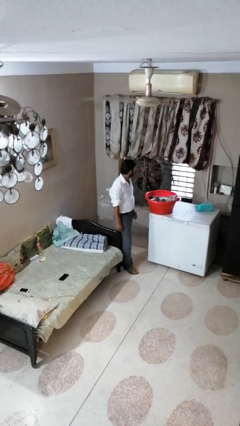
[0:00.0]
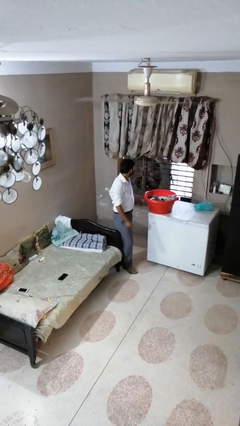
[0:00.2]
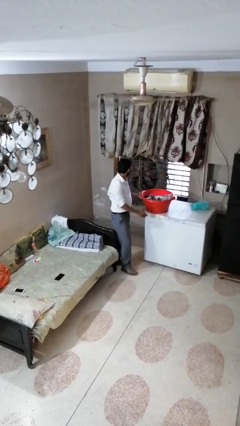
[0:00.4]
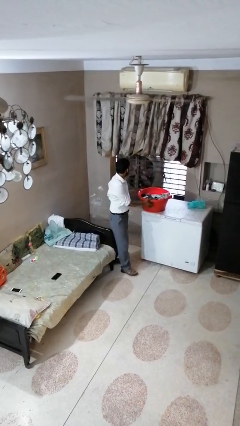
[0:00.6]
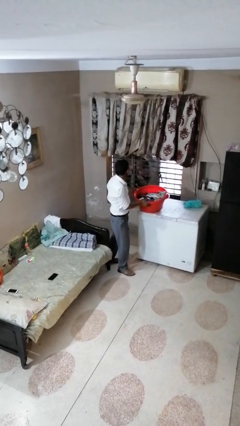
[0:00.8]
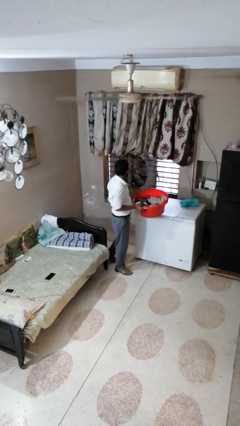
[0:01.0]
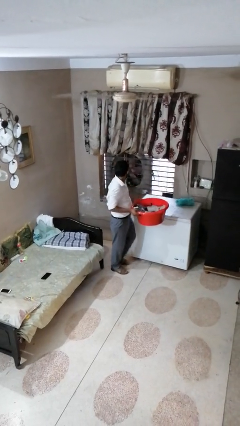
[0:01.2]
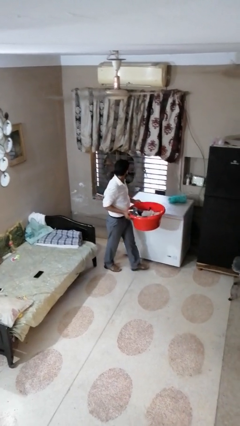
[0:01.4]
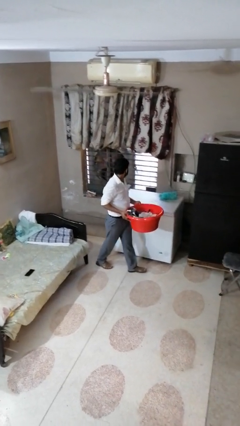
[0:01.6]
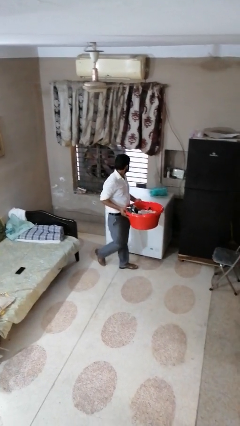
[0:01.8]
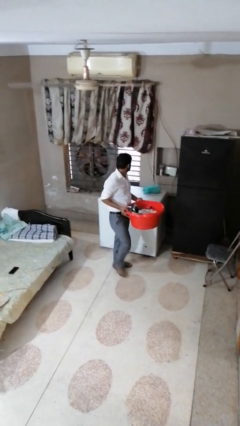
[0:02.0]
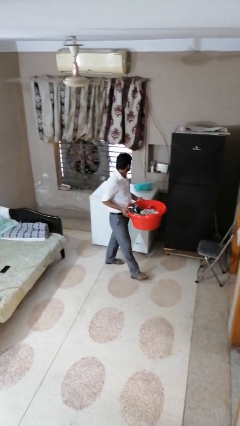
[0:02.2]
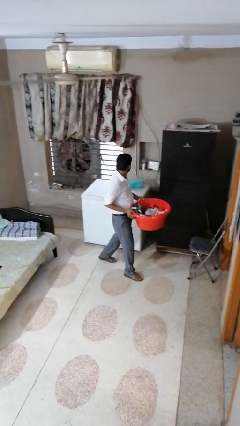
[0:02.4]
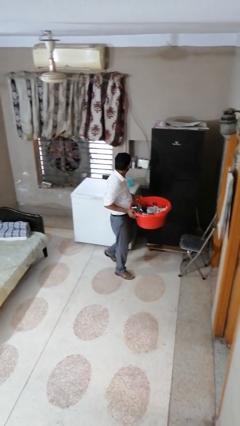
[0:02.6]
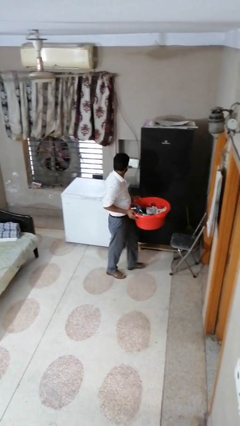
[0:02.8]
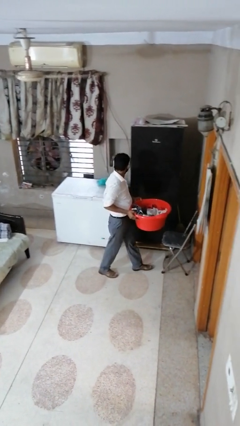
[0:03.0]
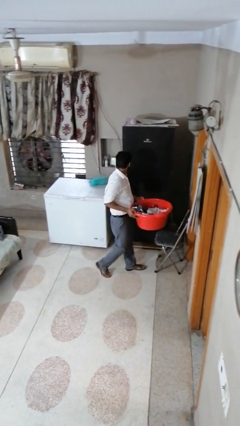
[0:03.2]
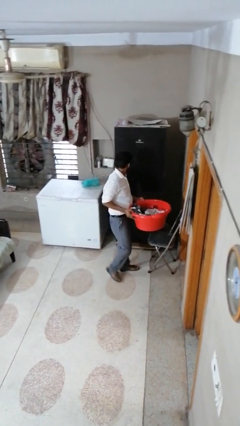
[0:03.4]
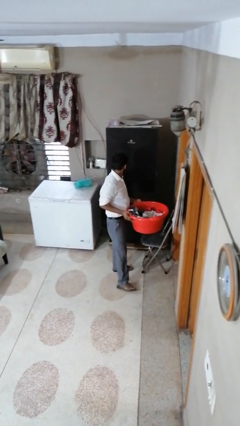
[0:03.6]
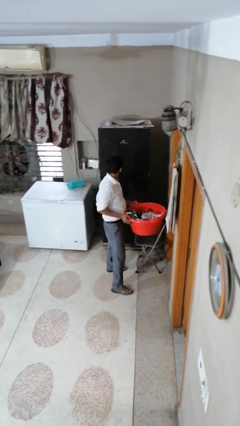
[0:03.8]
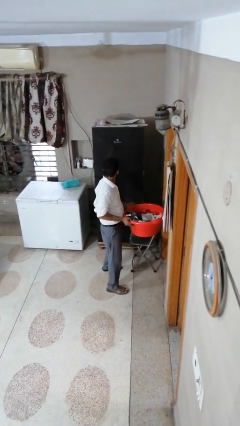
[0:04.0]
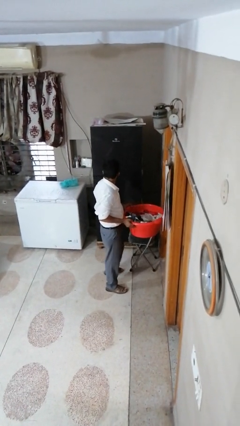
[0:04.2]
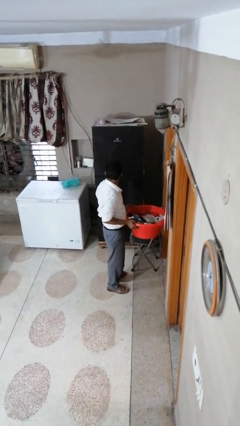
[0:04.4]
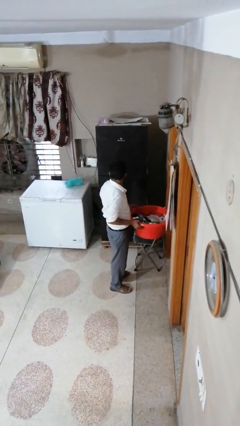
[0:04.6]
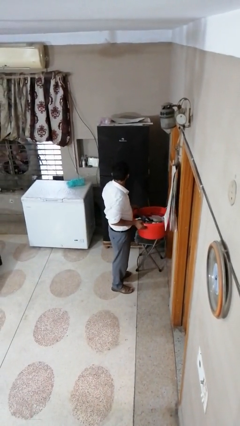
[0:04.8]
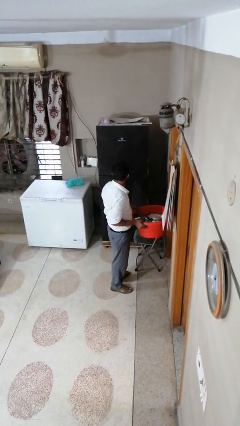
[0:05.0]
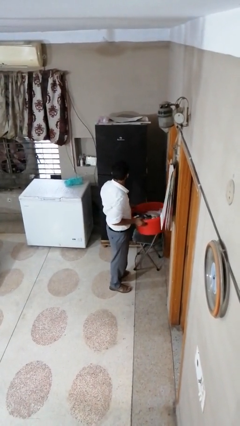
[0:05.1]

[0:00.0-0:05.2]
person carries laundry basket

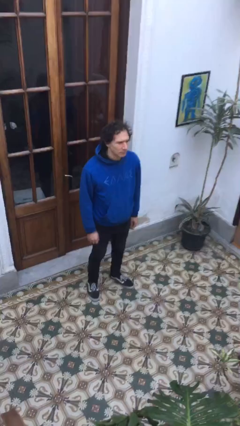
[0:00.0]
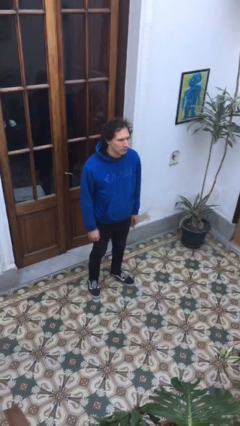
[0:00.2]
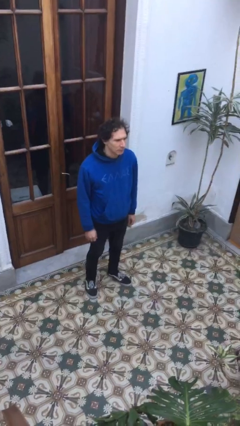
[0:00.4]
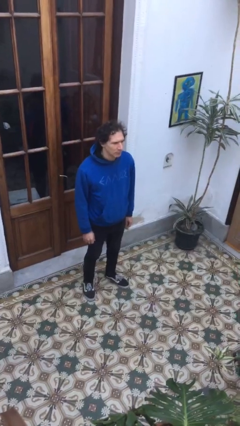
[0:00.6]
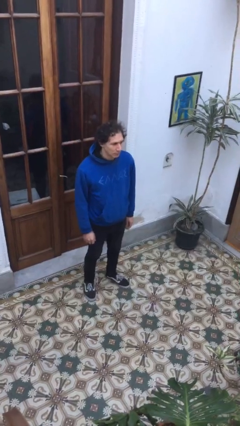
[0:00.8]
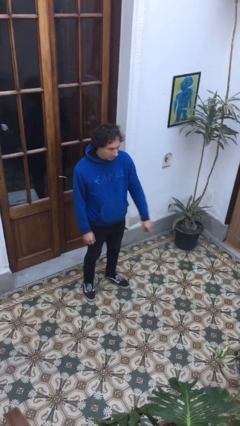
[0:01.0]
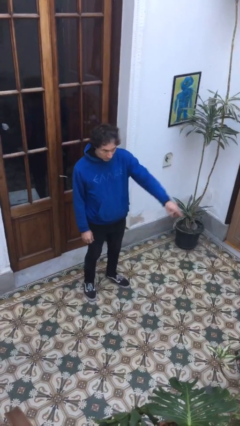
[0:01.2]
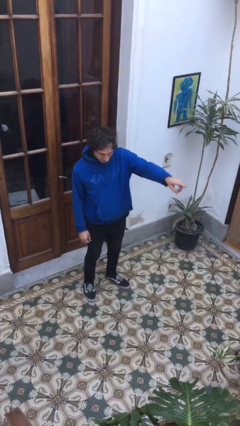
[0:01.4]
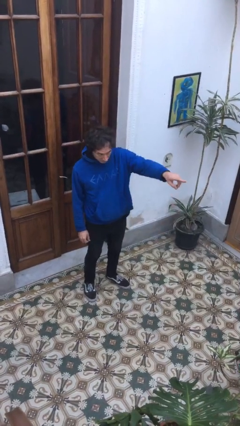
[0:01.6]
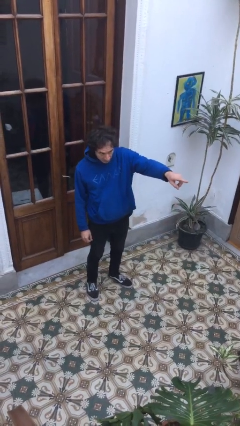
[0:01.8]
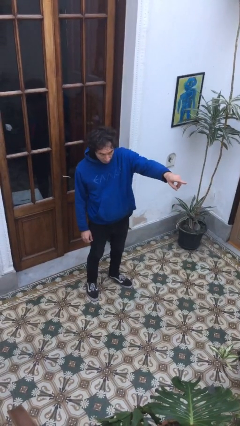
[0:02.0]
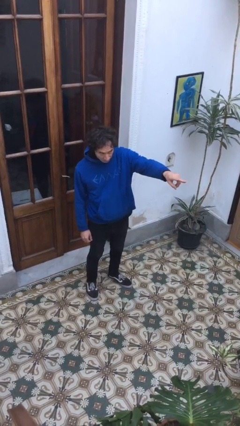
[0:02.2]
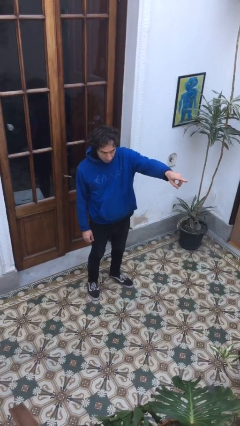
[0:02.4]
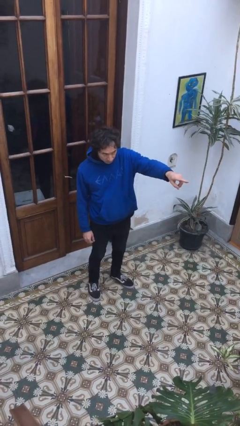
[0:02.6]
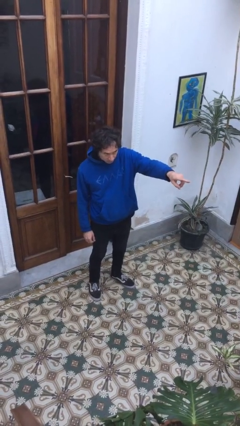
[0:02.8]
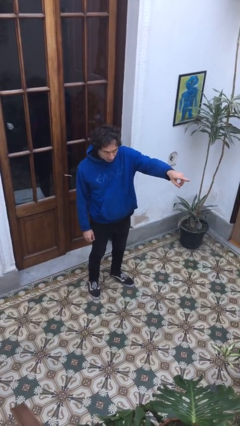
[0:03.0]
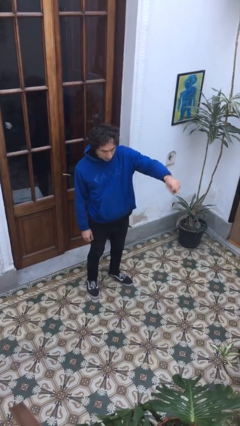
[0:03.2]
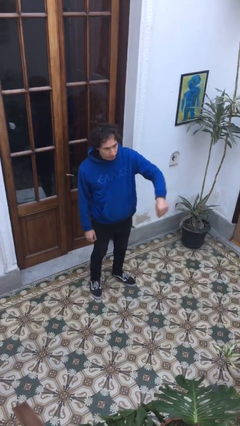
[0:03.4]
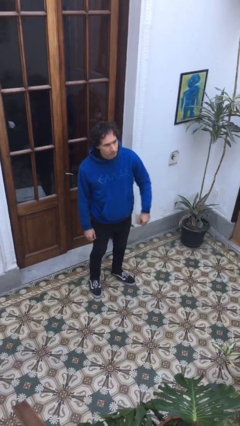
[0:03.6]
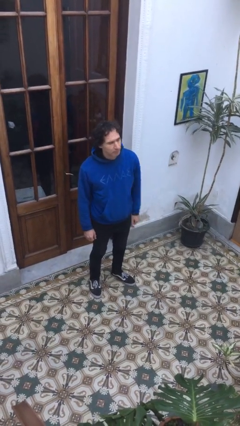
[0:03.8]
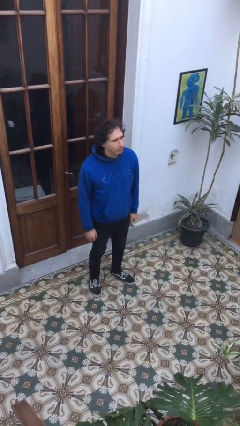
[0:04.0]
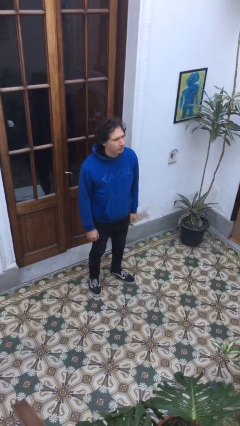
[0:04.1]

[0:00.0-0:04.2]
person points at person

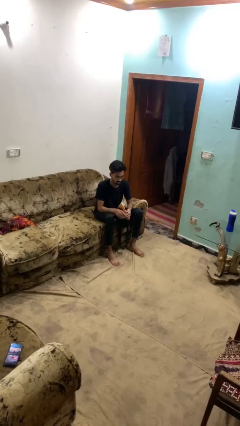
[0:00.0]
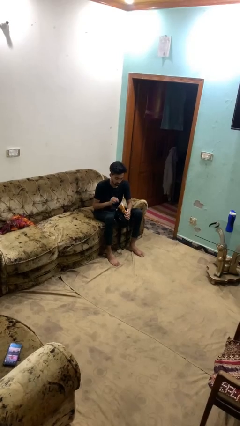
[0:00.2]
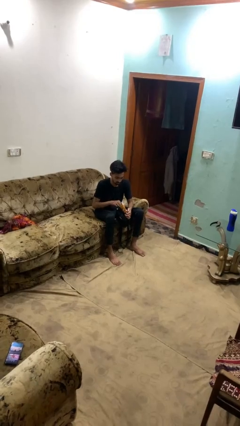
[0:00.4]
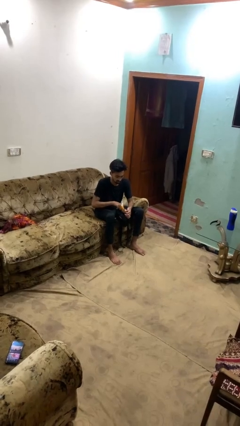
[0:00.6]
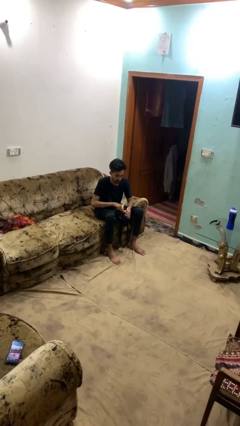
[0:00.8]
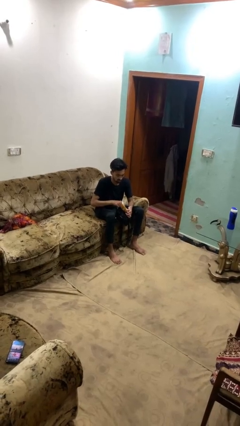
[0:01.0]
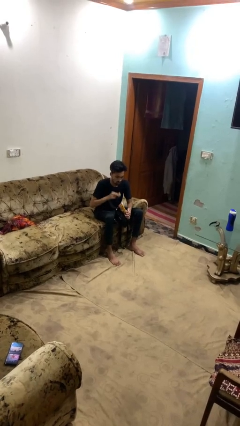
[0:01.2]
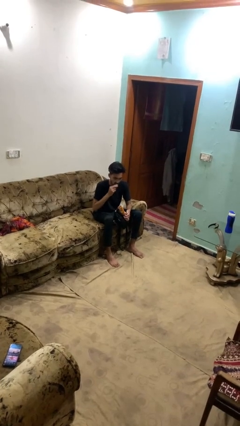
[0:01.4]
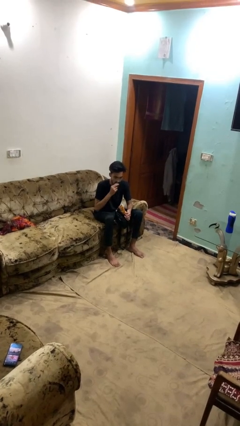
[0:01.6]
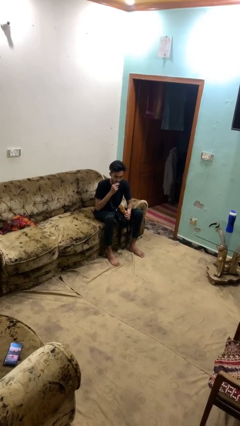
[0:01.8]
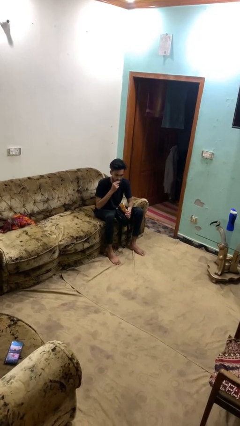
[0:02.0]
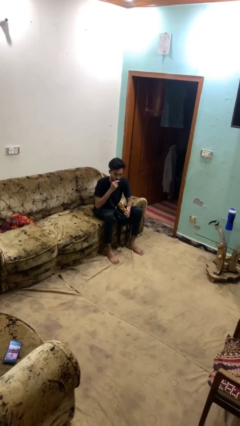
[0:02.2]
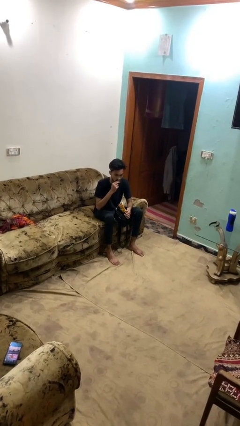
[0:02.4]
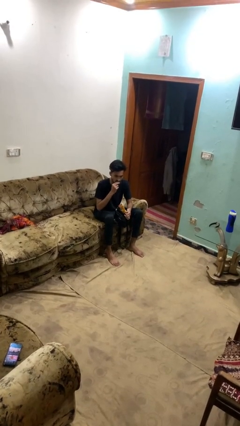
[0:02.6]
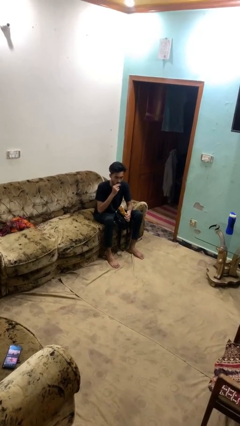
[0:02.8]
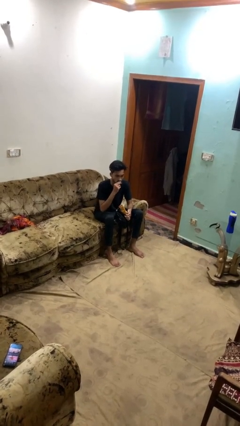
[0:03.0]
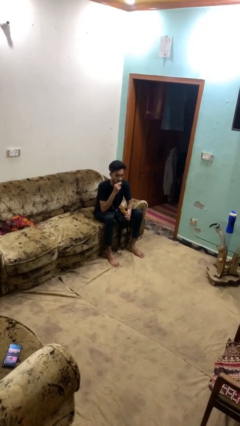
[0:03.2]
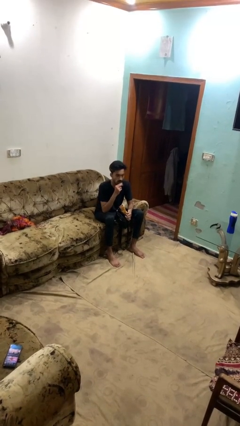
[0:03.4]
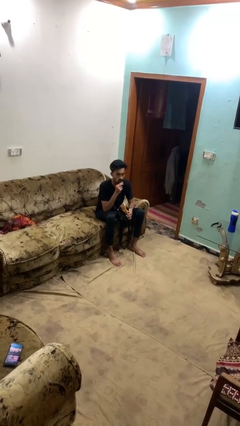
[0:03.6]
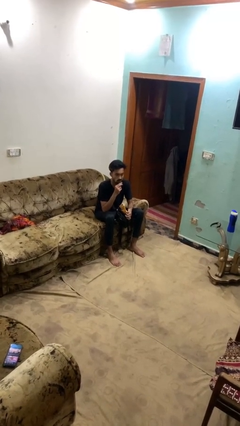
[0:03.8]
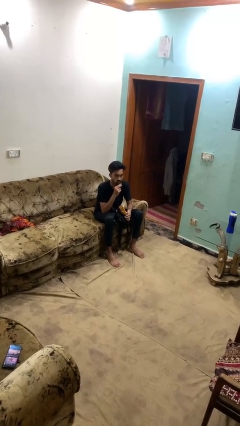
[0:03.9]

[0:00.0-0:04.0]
person eats snack from bag

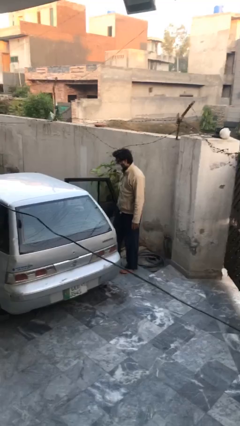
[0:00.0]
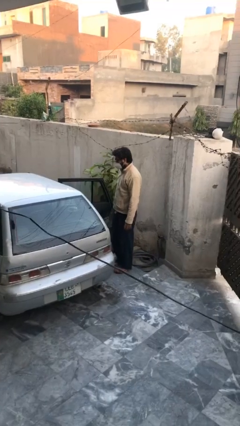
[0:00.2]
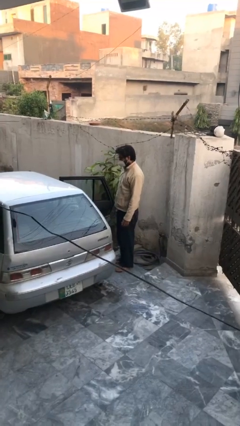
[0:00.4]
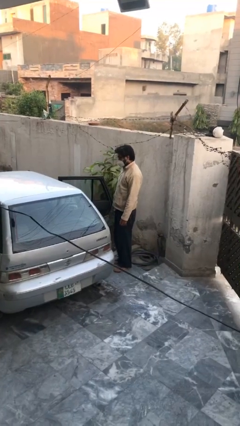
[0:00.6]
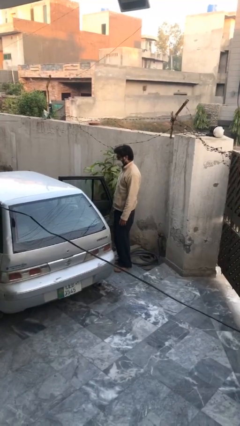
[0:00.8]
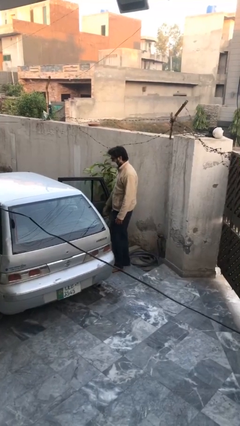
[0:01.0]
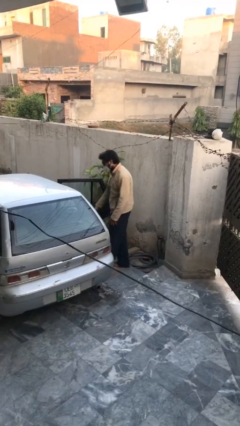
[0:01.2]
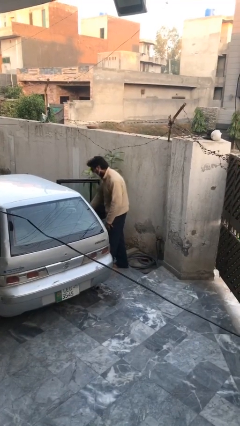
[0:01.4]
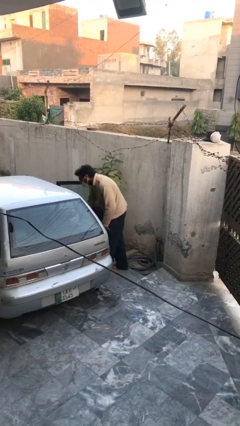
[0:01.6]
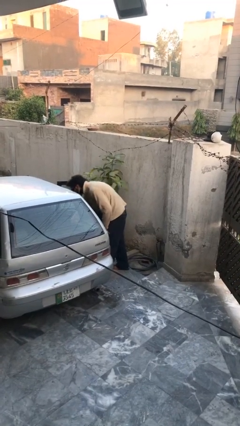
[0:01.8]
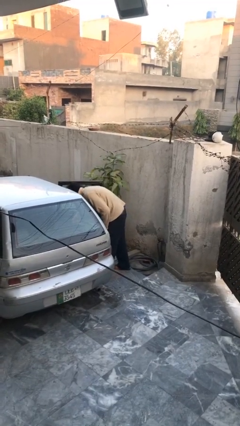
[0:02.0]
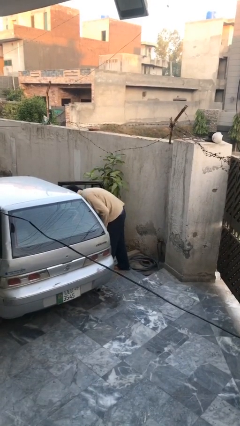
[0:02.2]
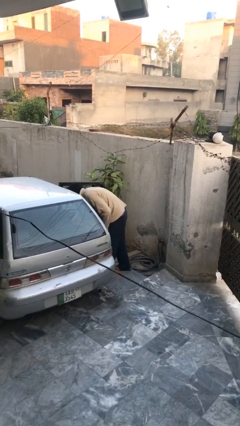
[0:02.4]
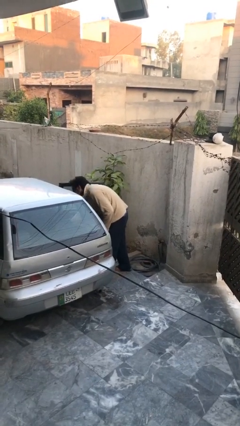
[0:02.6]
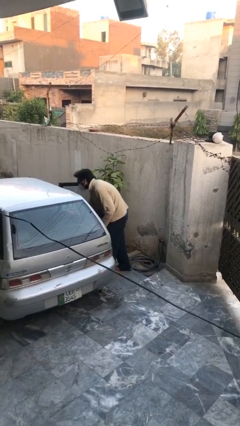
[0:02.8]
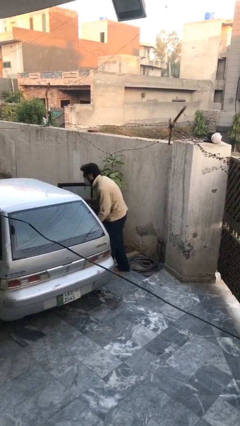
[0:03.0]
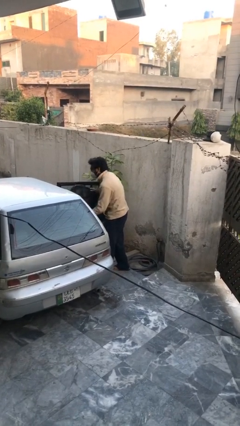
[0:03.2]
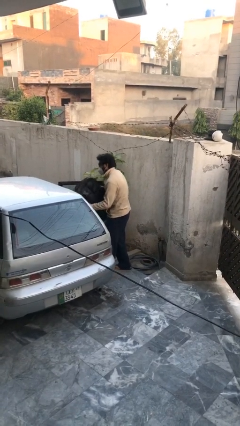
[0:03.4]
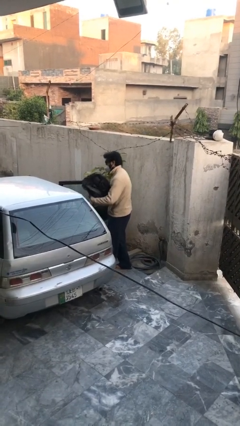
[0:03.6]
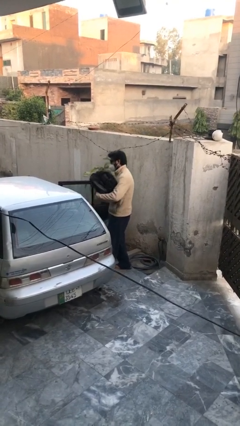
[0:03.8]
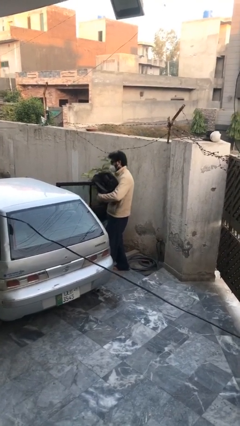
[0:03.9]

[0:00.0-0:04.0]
person unloads car
